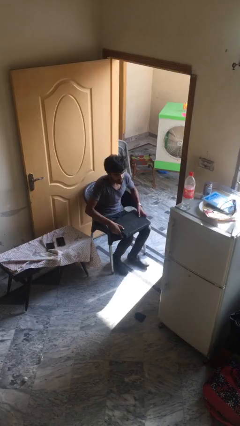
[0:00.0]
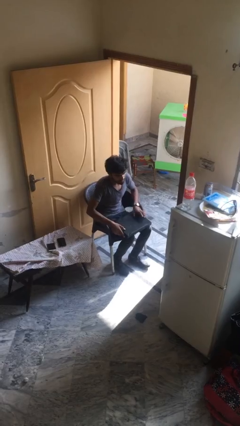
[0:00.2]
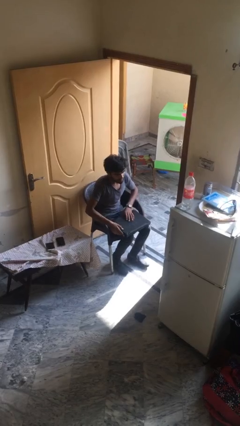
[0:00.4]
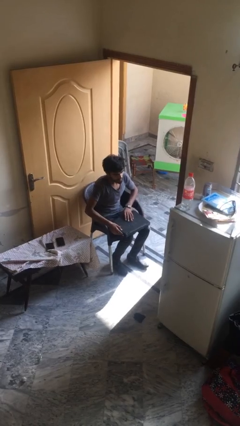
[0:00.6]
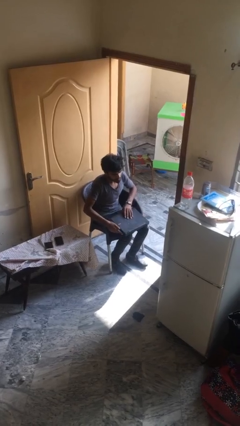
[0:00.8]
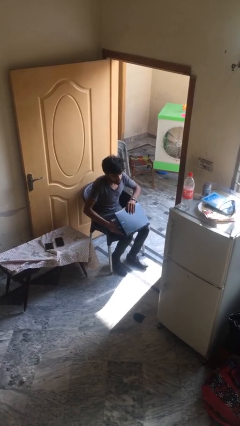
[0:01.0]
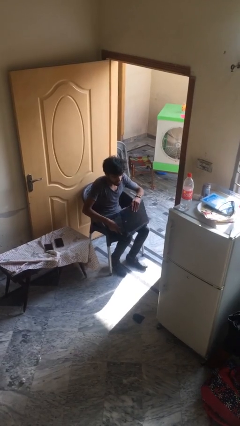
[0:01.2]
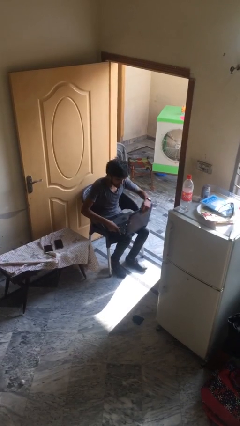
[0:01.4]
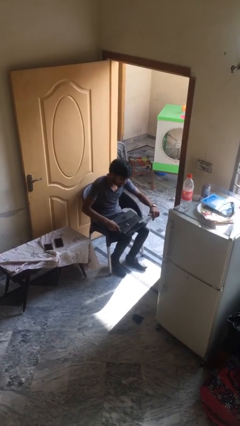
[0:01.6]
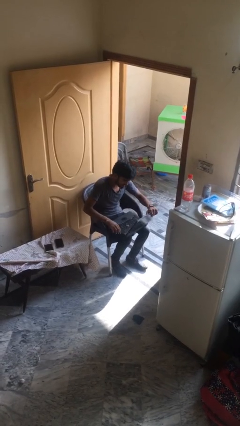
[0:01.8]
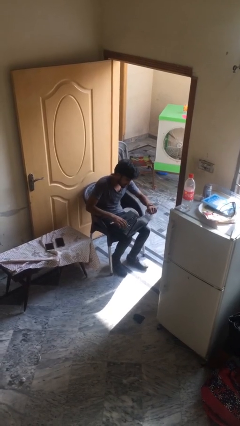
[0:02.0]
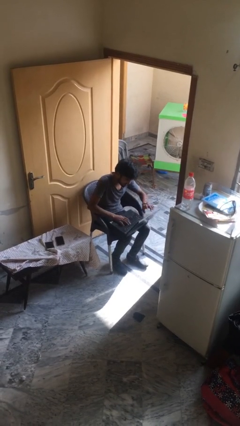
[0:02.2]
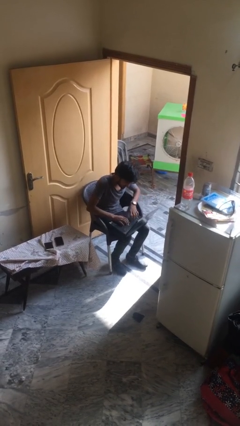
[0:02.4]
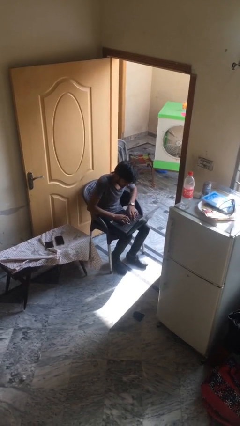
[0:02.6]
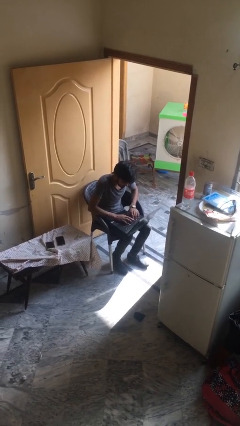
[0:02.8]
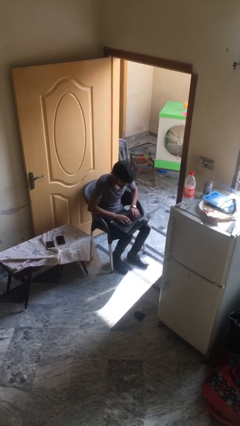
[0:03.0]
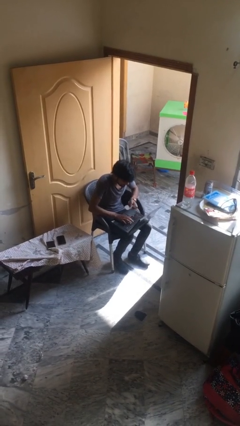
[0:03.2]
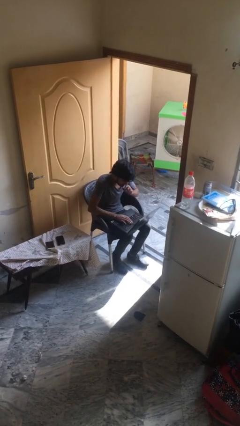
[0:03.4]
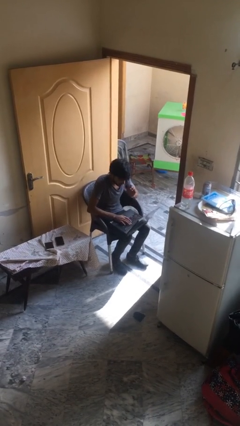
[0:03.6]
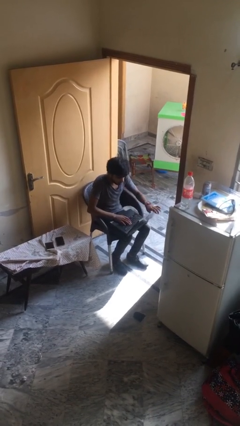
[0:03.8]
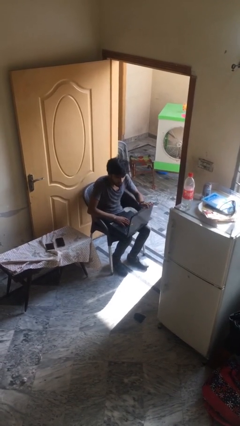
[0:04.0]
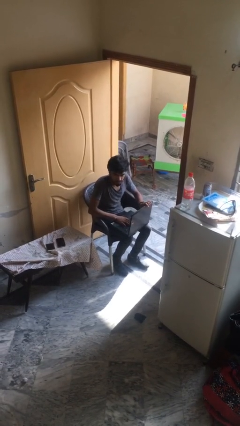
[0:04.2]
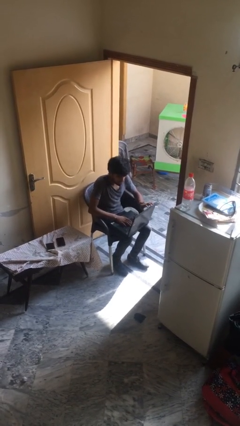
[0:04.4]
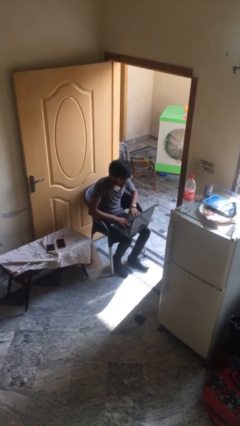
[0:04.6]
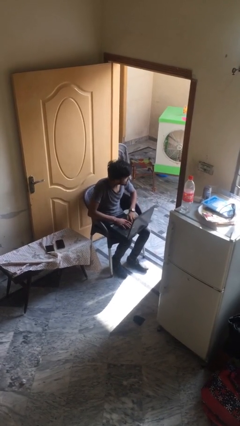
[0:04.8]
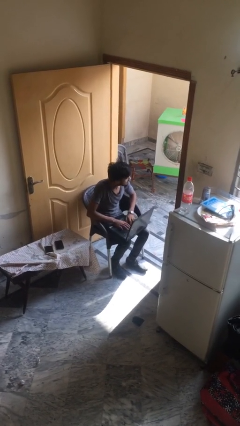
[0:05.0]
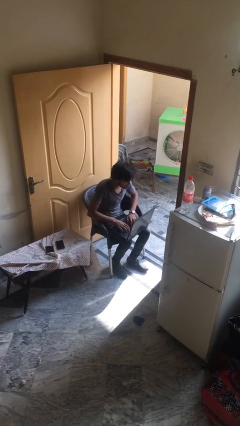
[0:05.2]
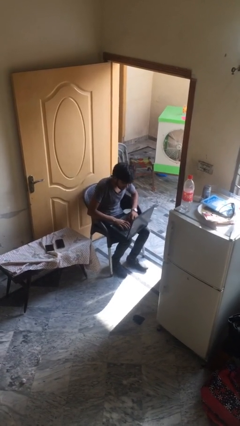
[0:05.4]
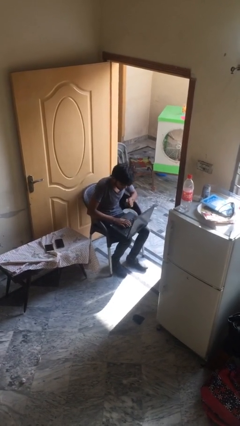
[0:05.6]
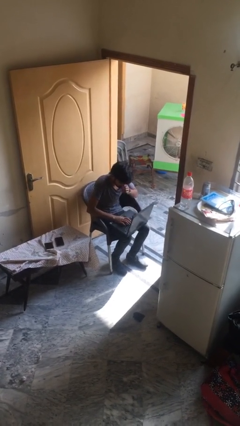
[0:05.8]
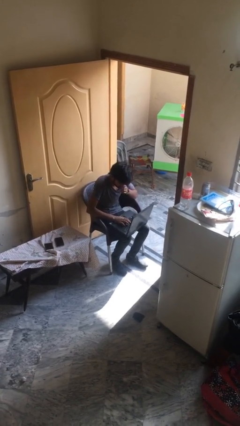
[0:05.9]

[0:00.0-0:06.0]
person interacts with laptop

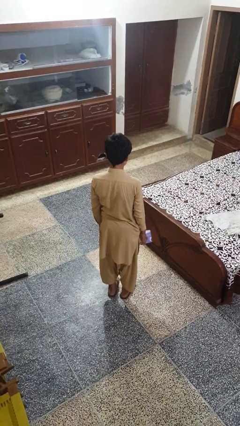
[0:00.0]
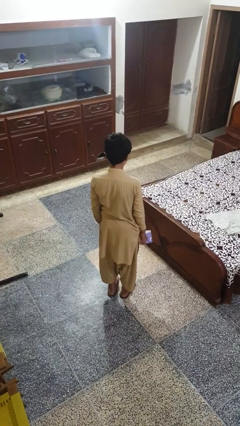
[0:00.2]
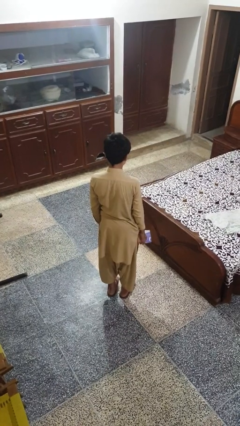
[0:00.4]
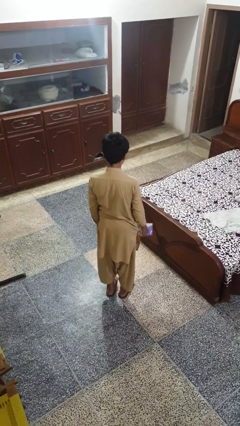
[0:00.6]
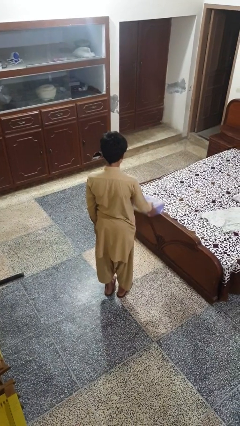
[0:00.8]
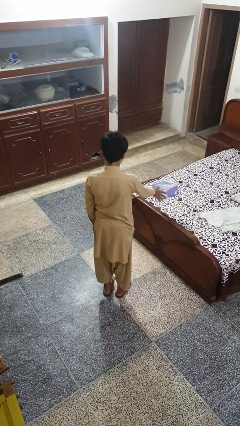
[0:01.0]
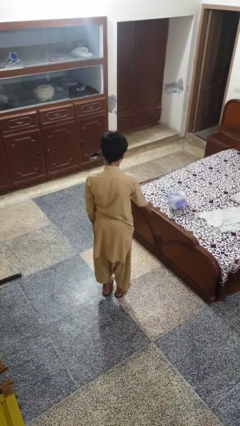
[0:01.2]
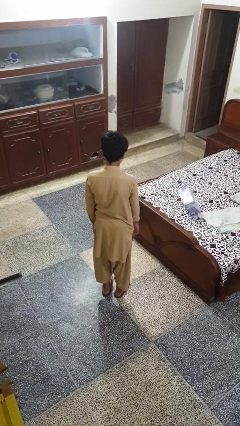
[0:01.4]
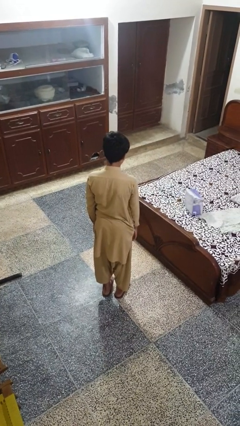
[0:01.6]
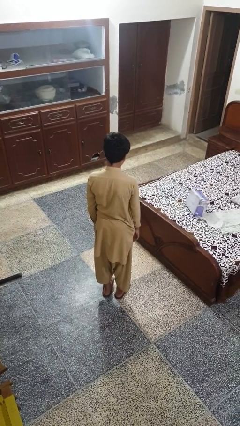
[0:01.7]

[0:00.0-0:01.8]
person throws object on bed

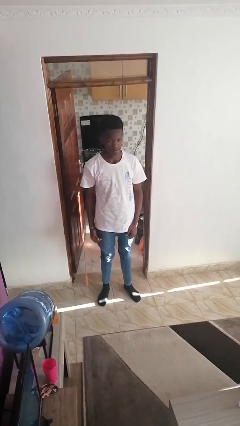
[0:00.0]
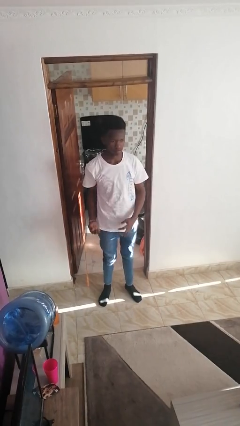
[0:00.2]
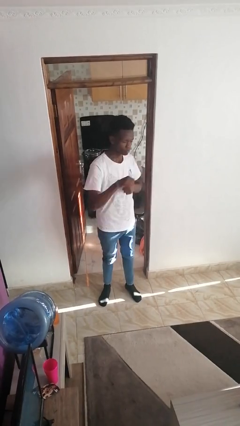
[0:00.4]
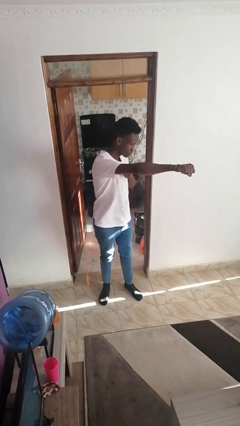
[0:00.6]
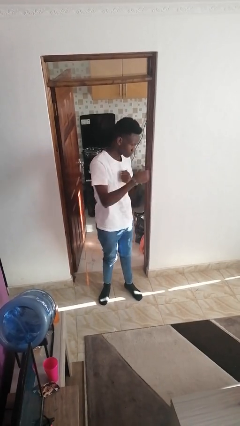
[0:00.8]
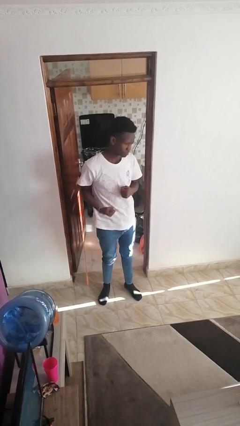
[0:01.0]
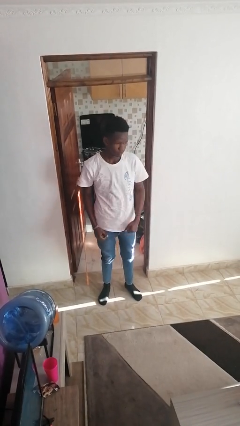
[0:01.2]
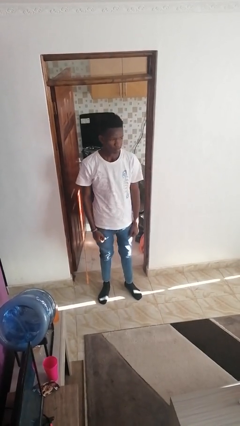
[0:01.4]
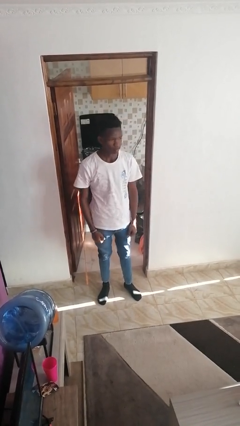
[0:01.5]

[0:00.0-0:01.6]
person punches

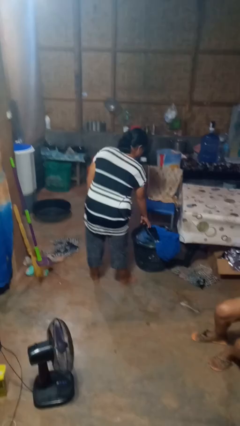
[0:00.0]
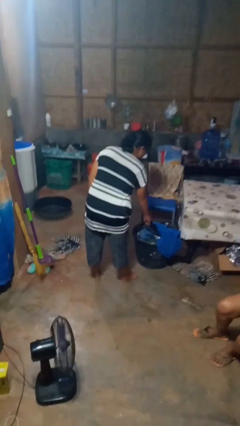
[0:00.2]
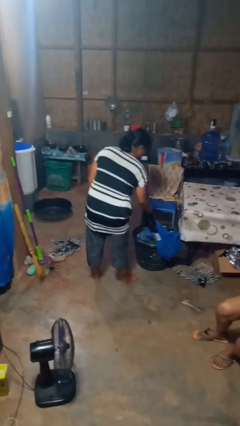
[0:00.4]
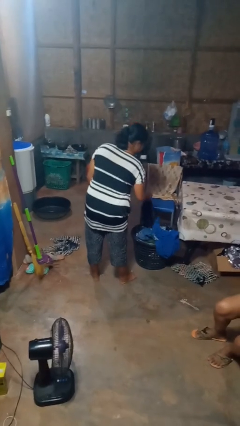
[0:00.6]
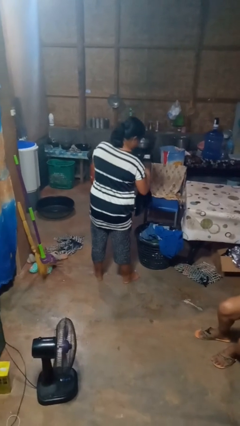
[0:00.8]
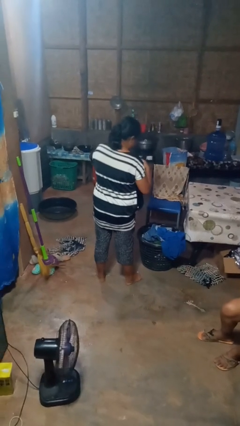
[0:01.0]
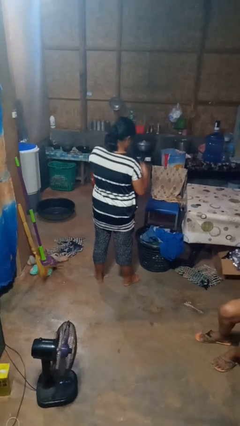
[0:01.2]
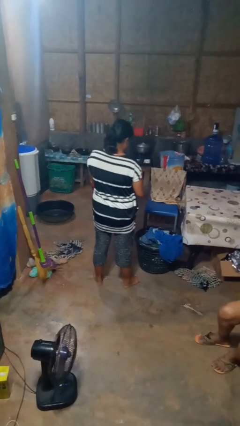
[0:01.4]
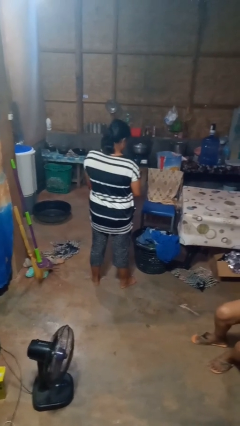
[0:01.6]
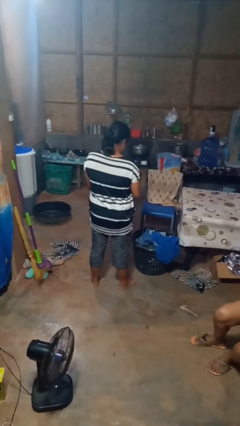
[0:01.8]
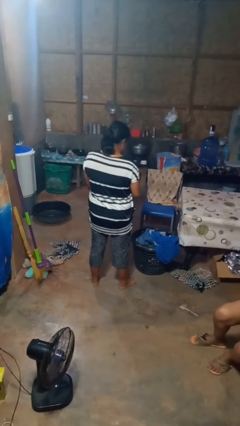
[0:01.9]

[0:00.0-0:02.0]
person takes object from basket

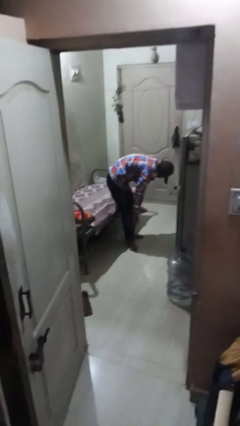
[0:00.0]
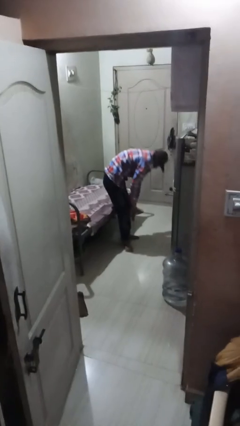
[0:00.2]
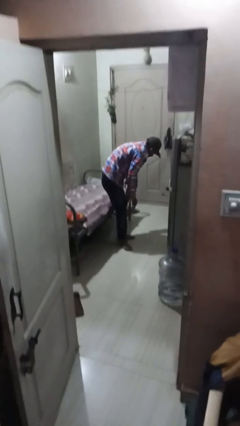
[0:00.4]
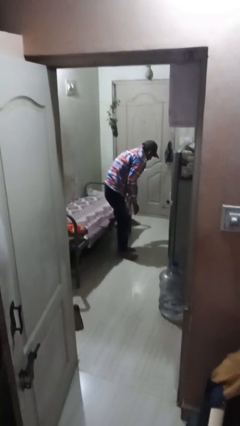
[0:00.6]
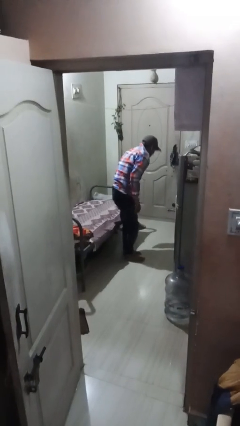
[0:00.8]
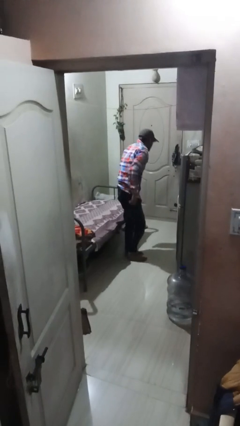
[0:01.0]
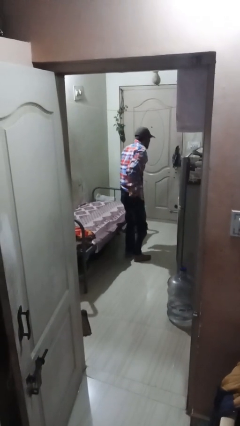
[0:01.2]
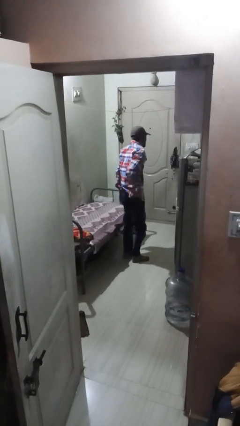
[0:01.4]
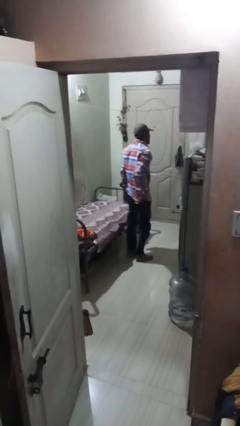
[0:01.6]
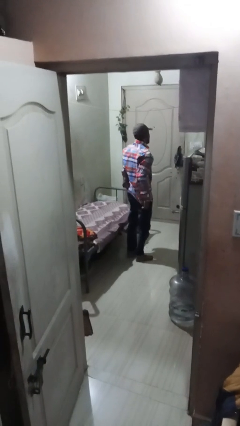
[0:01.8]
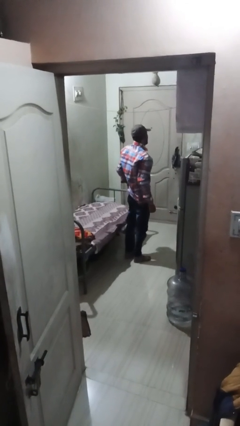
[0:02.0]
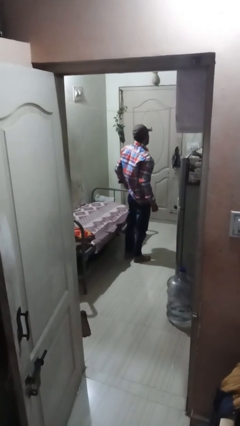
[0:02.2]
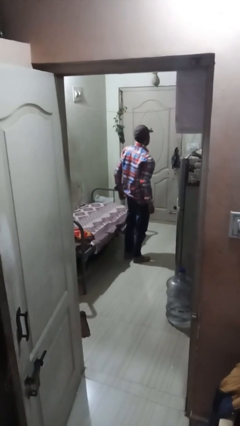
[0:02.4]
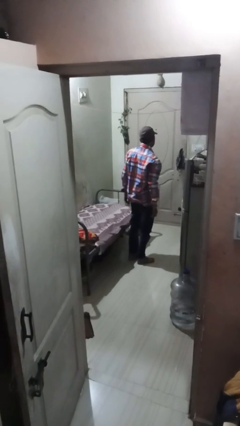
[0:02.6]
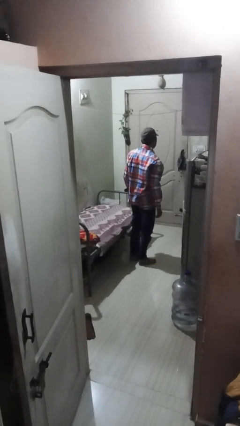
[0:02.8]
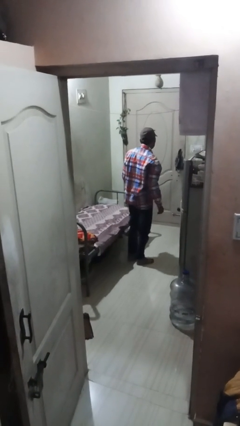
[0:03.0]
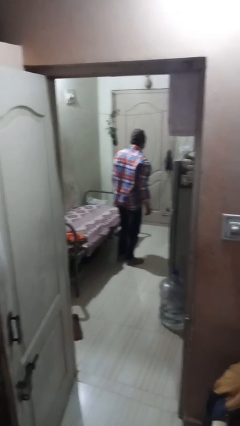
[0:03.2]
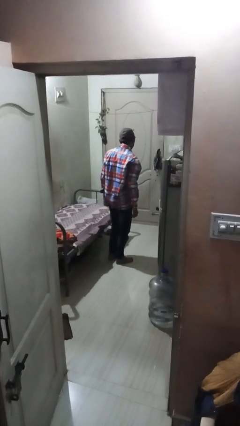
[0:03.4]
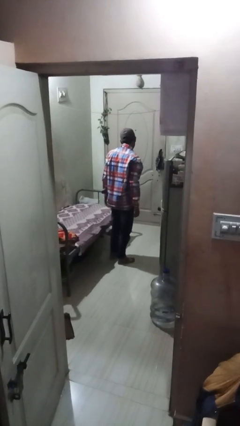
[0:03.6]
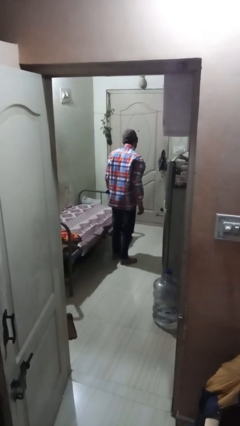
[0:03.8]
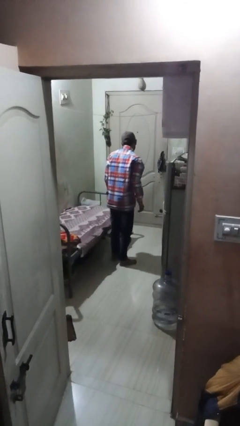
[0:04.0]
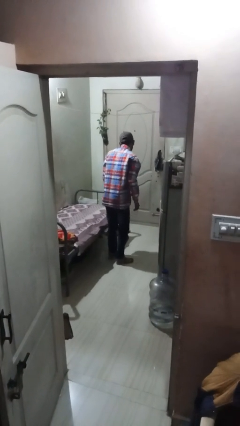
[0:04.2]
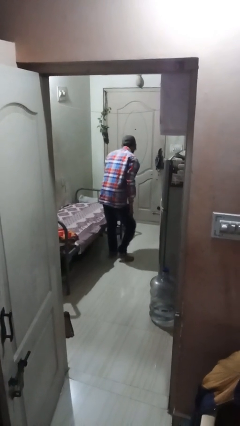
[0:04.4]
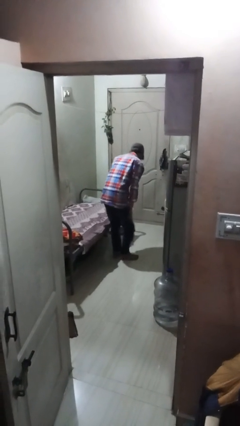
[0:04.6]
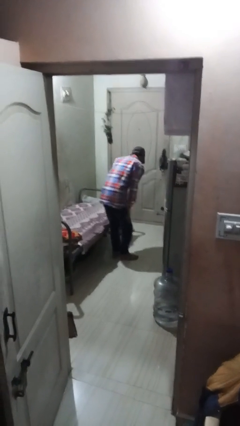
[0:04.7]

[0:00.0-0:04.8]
person stands up from floor

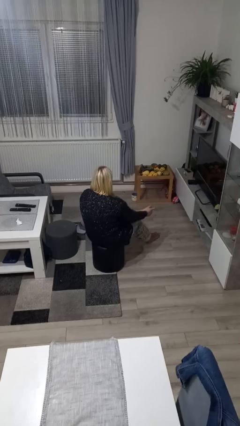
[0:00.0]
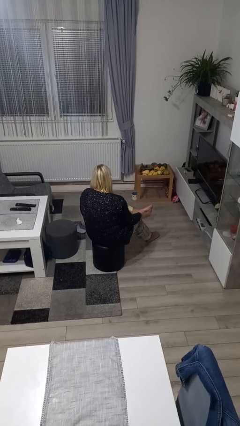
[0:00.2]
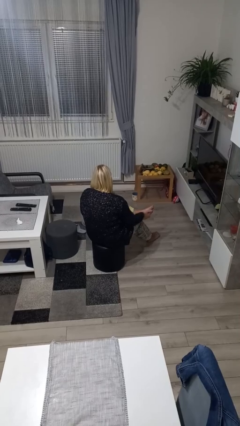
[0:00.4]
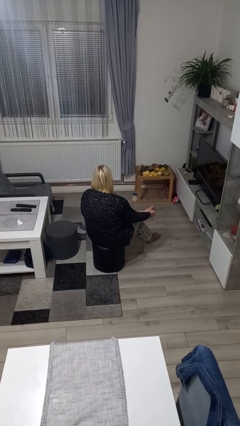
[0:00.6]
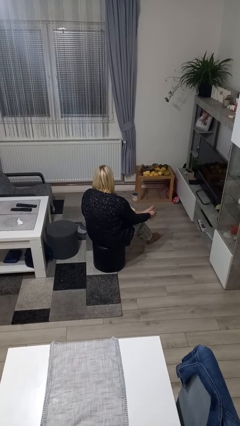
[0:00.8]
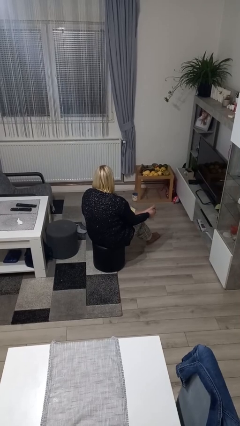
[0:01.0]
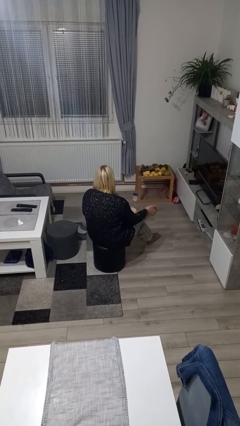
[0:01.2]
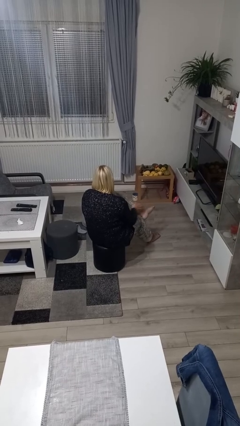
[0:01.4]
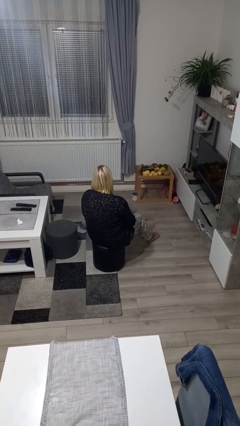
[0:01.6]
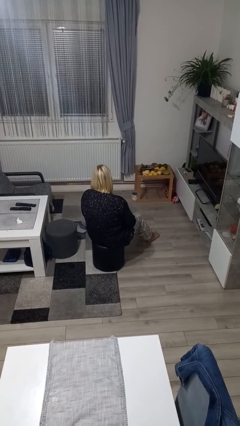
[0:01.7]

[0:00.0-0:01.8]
person rubs foot
